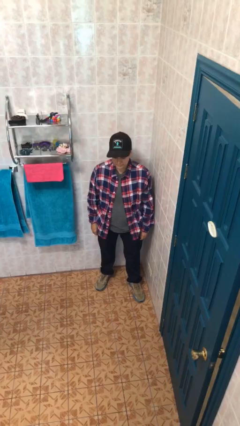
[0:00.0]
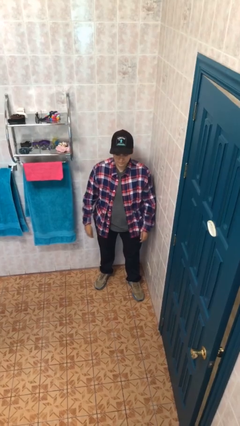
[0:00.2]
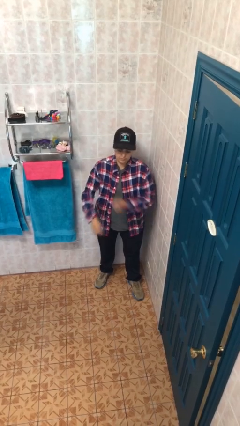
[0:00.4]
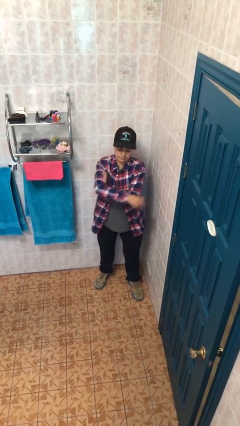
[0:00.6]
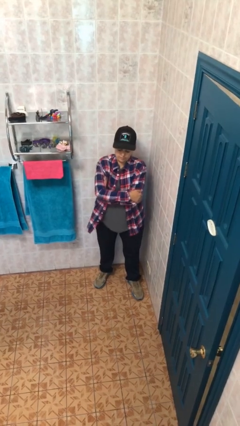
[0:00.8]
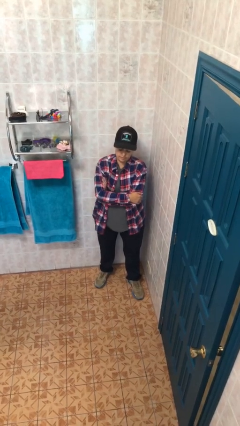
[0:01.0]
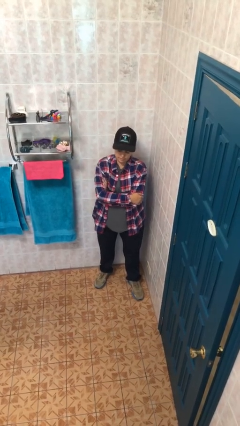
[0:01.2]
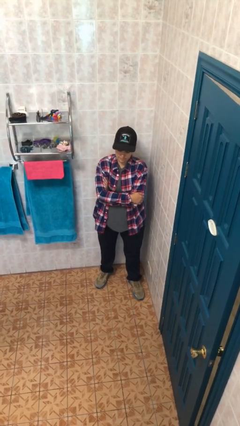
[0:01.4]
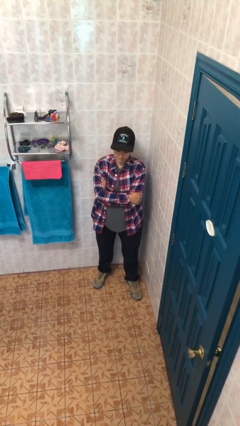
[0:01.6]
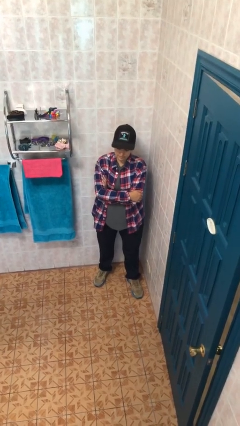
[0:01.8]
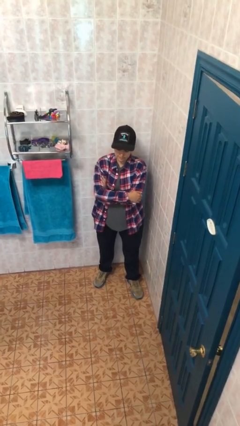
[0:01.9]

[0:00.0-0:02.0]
person crosses arms

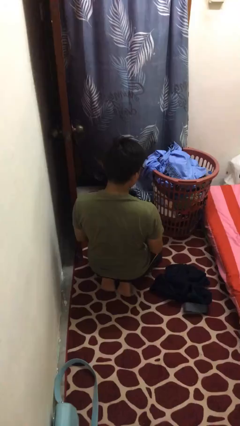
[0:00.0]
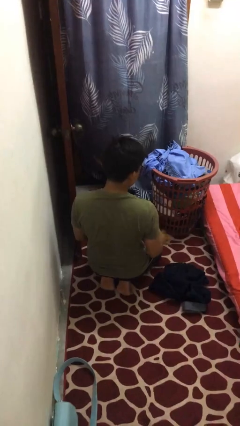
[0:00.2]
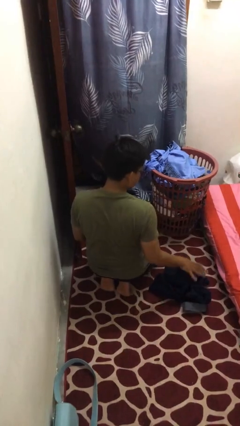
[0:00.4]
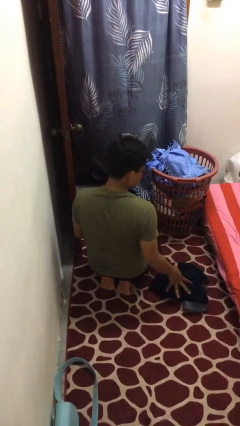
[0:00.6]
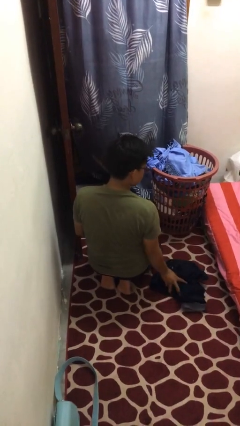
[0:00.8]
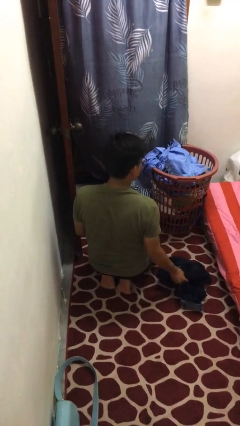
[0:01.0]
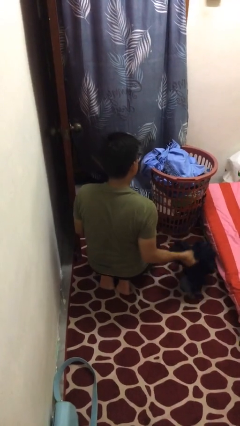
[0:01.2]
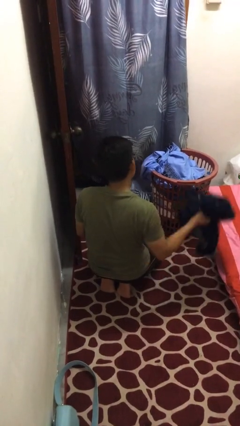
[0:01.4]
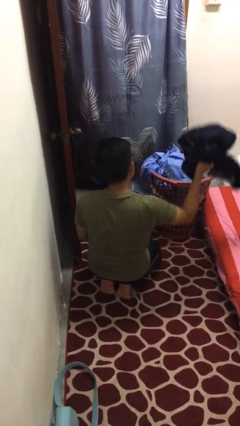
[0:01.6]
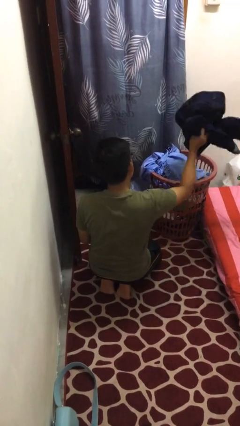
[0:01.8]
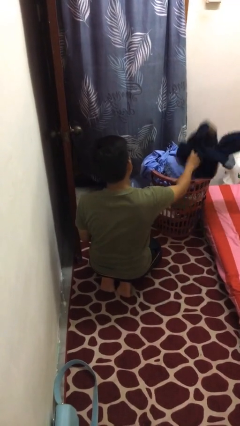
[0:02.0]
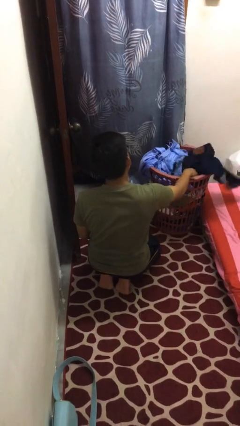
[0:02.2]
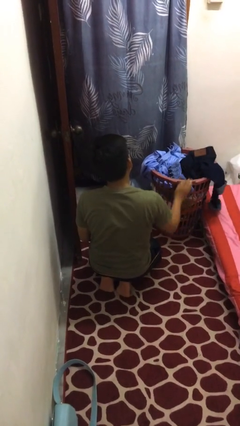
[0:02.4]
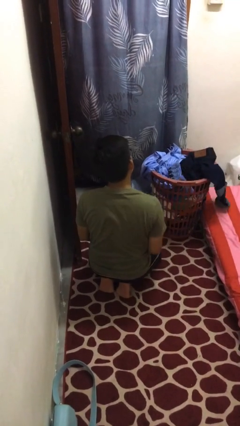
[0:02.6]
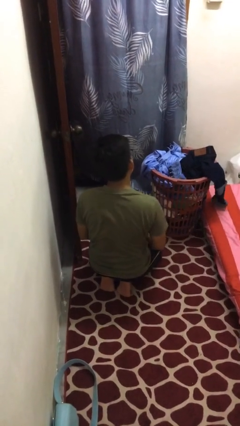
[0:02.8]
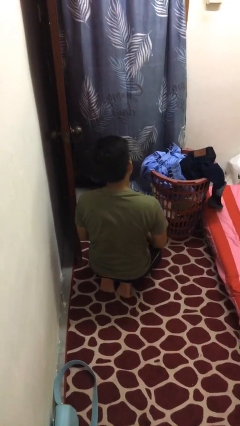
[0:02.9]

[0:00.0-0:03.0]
person puts object into basket

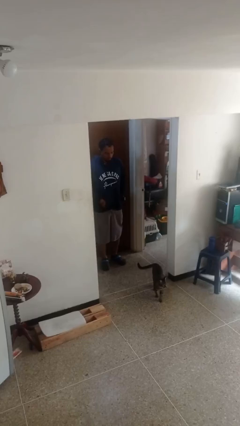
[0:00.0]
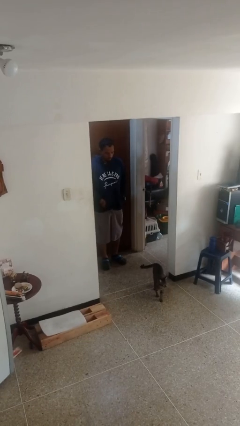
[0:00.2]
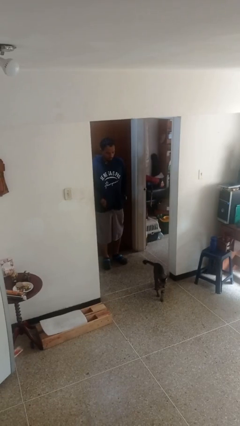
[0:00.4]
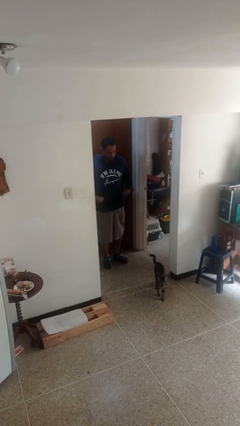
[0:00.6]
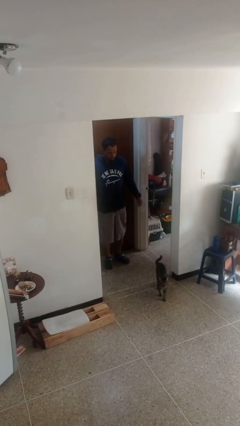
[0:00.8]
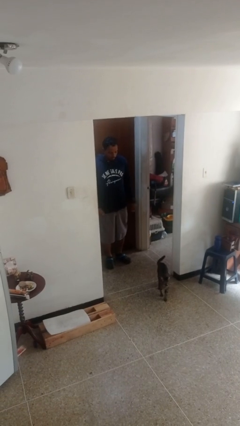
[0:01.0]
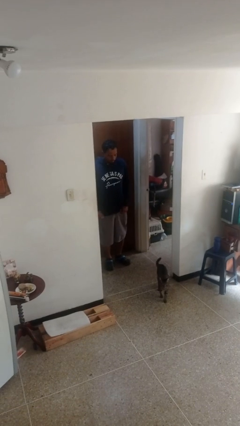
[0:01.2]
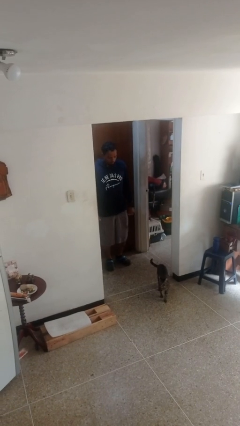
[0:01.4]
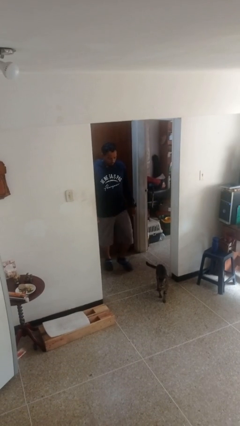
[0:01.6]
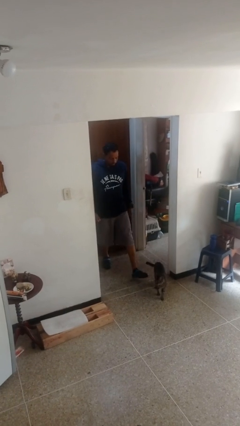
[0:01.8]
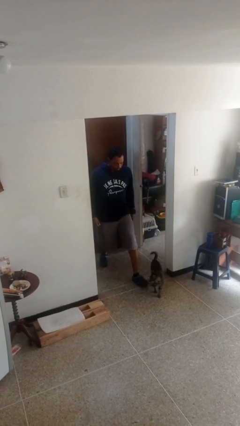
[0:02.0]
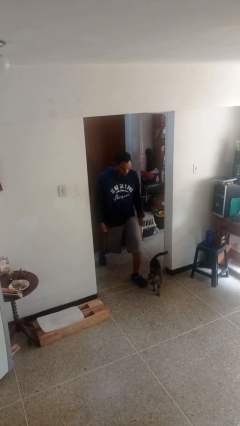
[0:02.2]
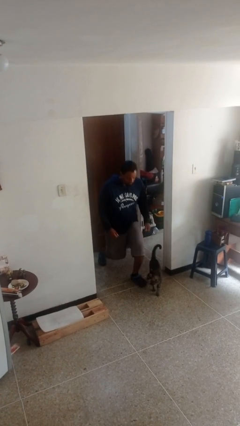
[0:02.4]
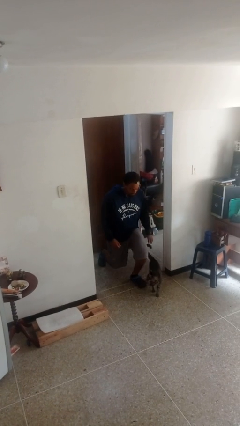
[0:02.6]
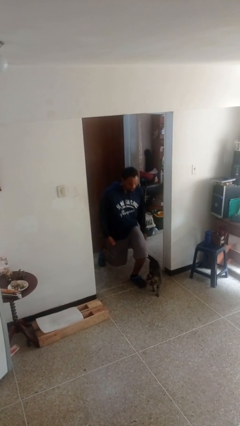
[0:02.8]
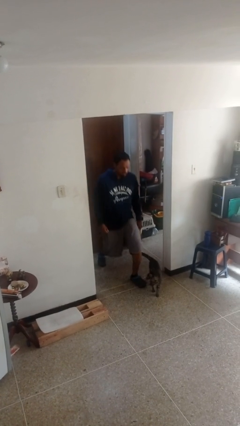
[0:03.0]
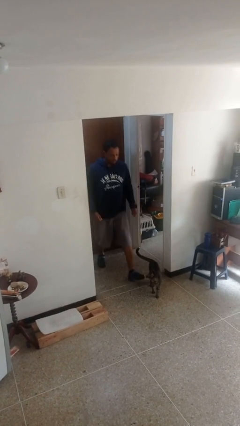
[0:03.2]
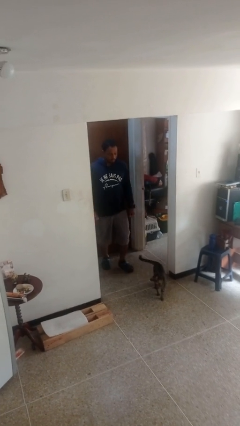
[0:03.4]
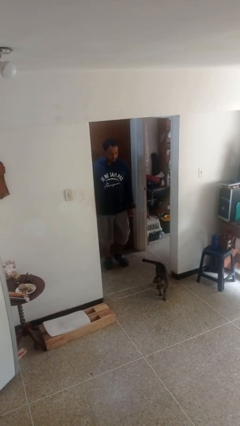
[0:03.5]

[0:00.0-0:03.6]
person exercises with lunges

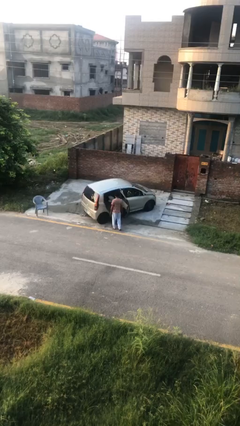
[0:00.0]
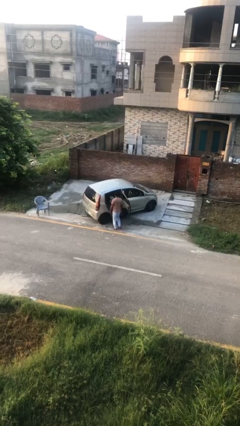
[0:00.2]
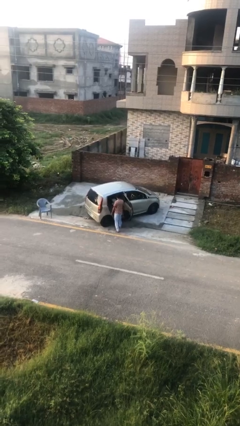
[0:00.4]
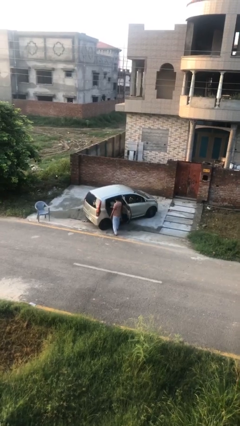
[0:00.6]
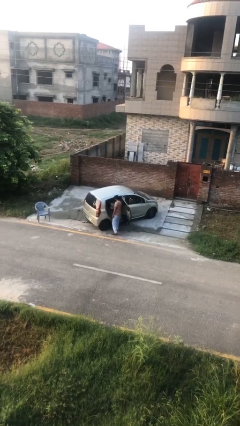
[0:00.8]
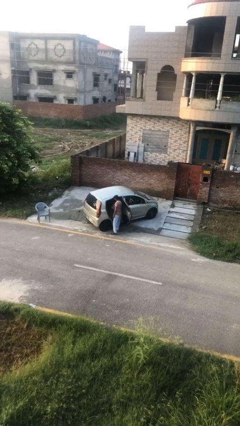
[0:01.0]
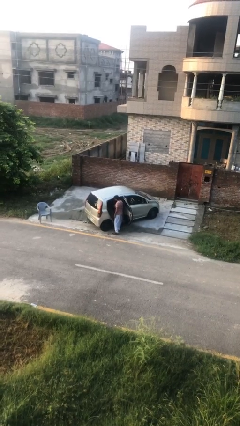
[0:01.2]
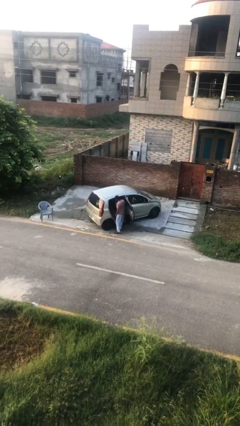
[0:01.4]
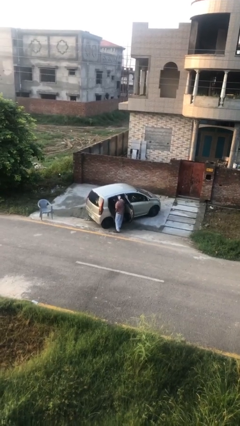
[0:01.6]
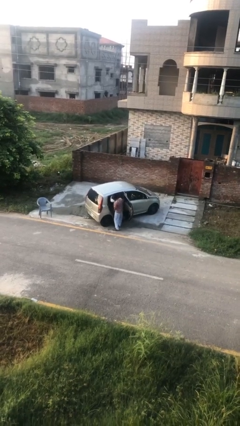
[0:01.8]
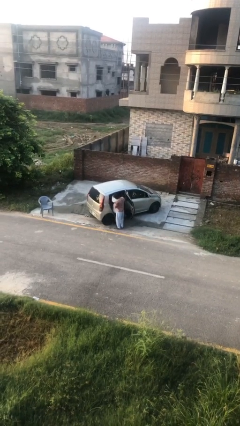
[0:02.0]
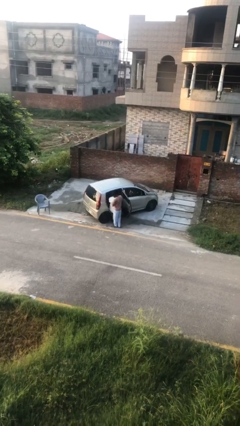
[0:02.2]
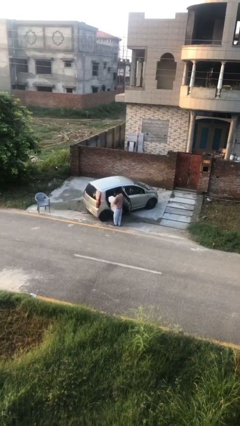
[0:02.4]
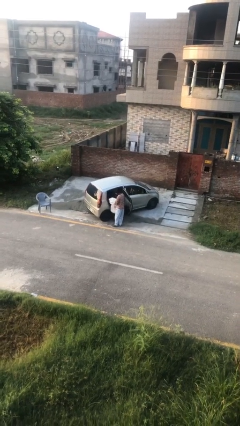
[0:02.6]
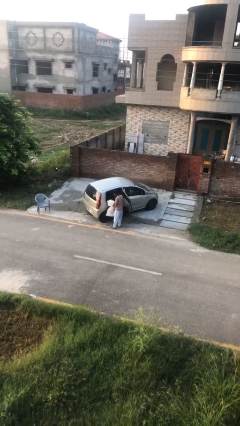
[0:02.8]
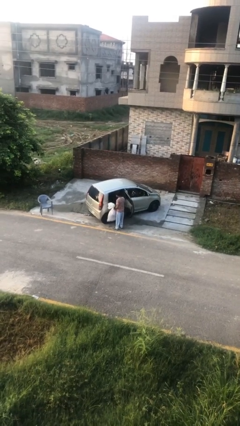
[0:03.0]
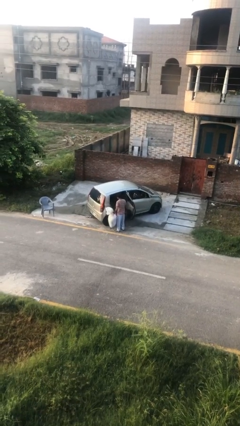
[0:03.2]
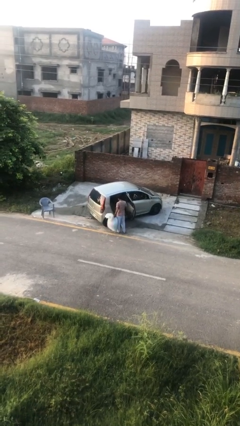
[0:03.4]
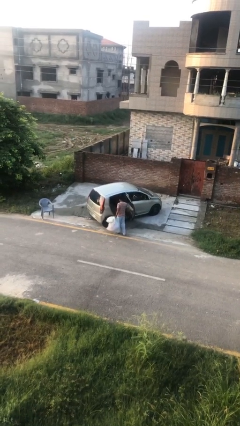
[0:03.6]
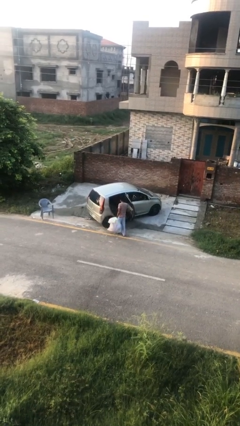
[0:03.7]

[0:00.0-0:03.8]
person unloads car

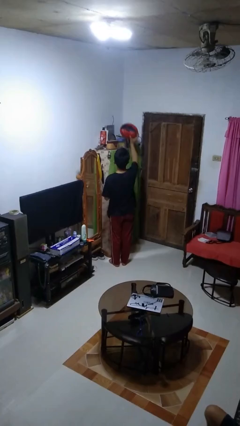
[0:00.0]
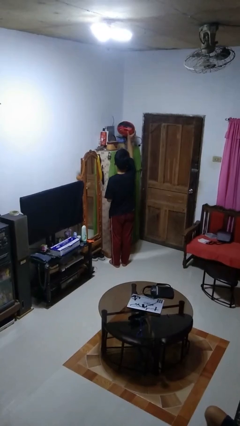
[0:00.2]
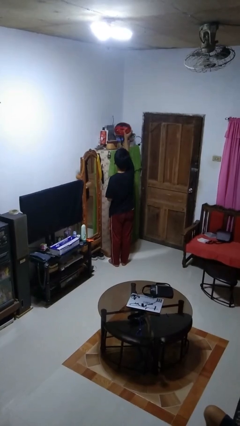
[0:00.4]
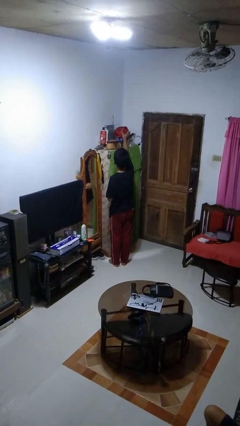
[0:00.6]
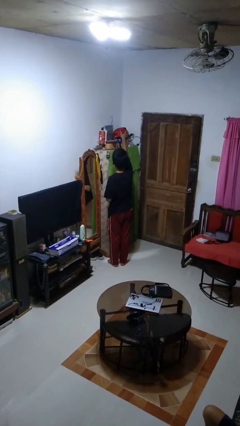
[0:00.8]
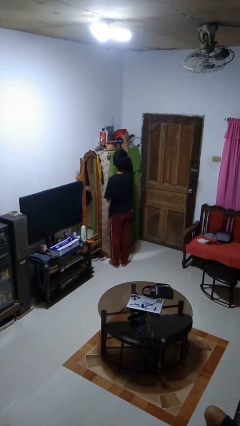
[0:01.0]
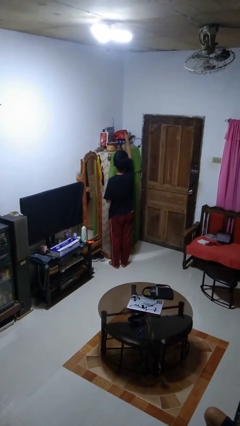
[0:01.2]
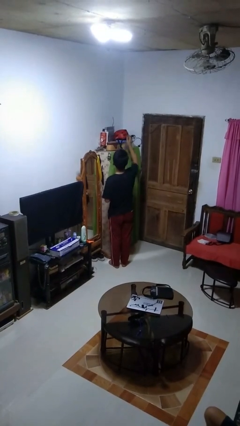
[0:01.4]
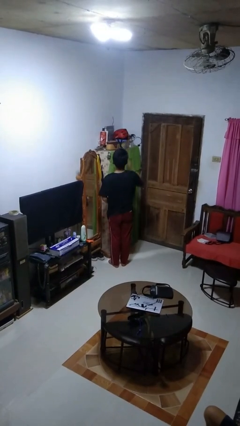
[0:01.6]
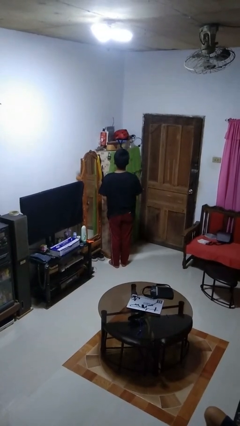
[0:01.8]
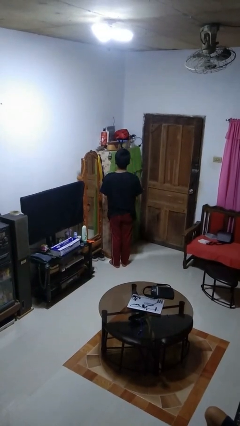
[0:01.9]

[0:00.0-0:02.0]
person puts down object on shelf

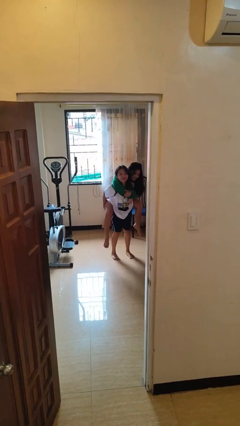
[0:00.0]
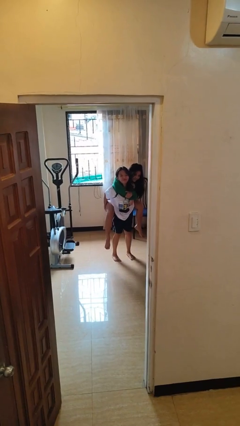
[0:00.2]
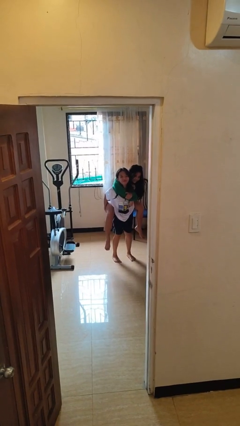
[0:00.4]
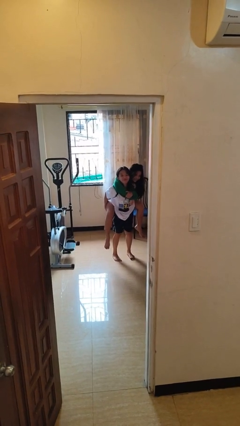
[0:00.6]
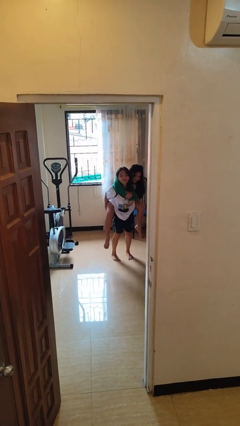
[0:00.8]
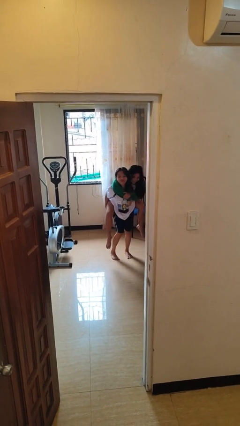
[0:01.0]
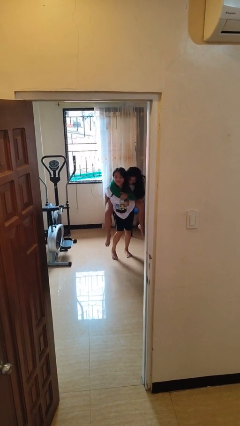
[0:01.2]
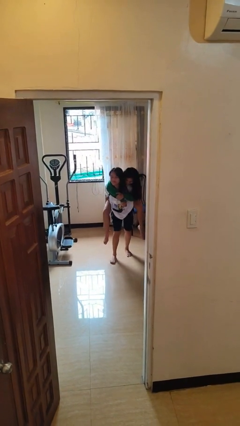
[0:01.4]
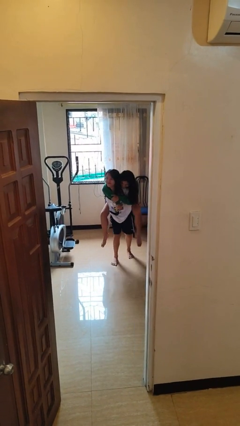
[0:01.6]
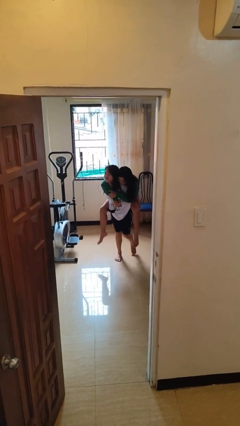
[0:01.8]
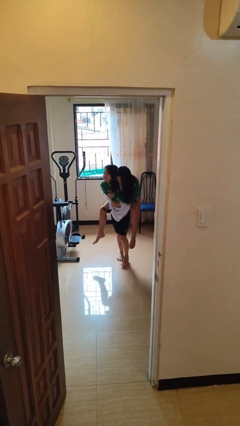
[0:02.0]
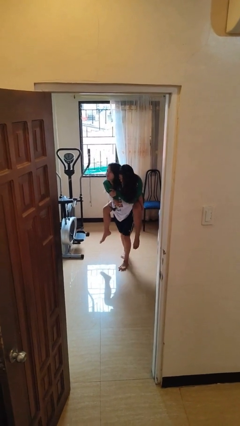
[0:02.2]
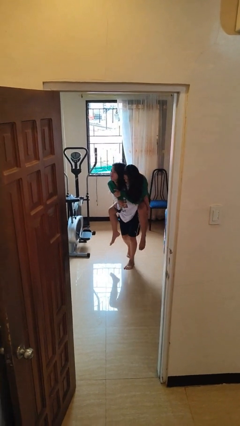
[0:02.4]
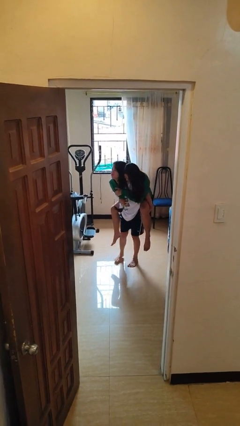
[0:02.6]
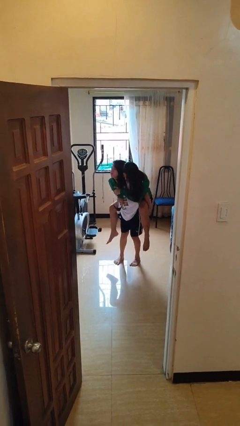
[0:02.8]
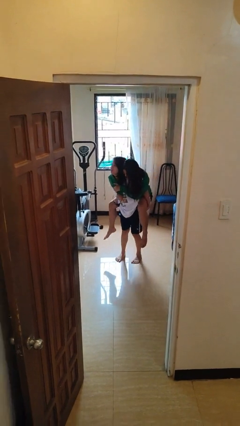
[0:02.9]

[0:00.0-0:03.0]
person carries person on back
